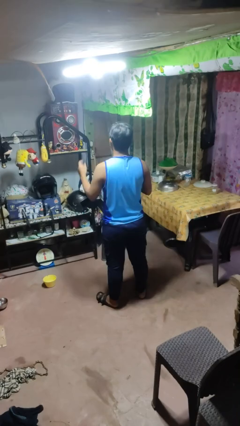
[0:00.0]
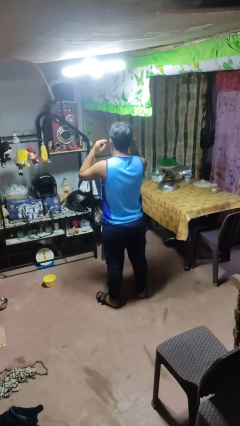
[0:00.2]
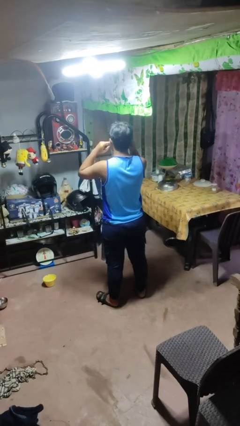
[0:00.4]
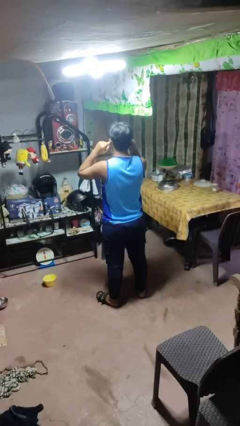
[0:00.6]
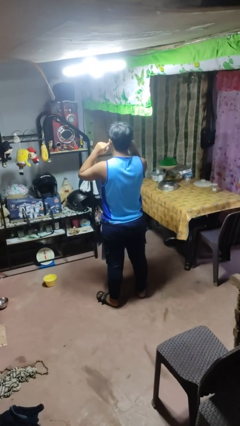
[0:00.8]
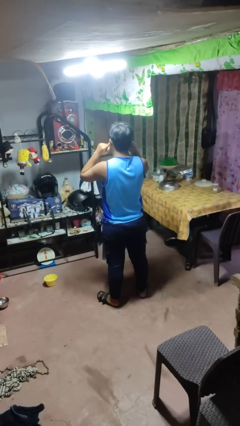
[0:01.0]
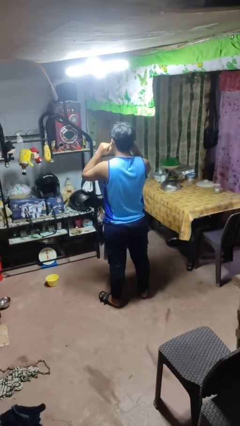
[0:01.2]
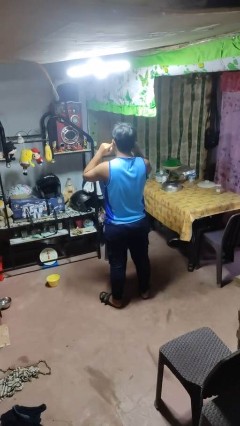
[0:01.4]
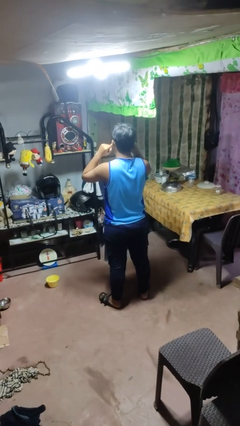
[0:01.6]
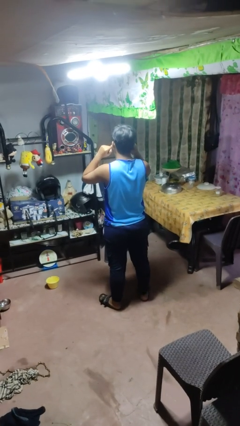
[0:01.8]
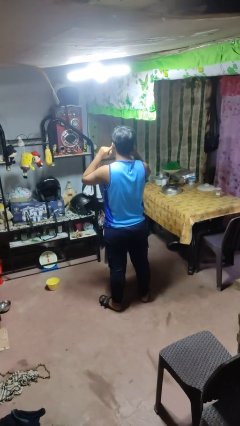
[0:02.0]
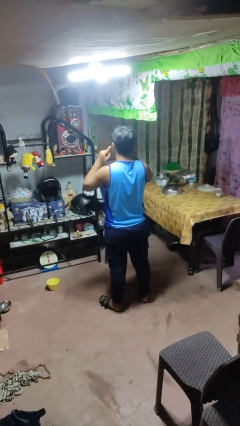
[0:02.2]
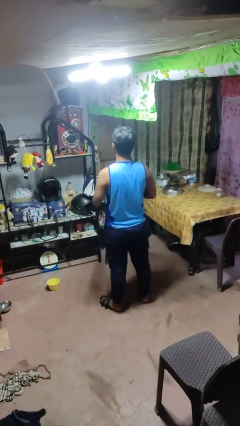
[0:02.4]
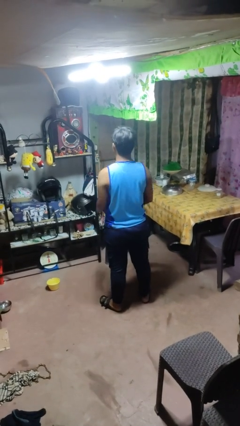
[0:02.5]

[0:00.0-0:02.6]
person puts fingers in ear

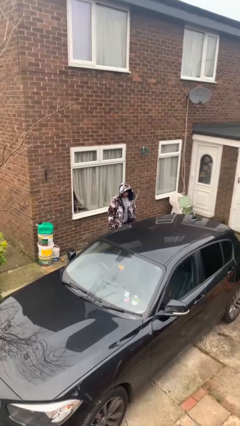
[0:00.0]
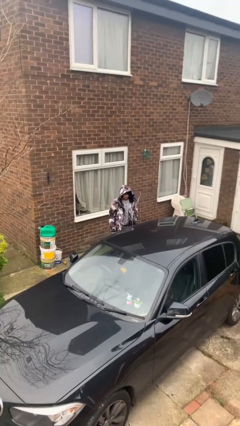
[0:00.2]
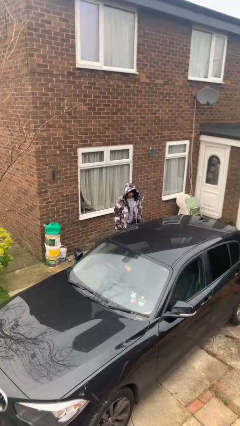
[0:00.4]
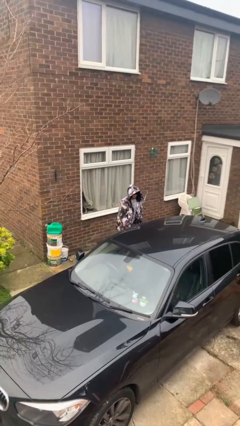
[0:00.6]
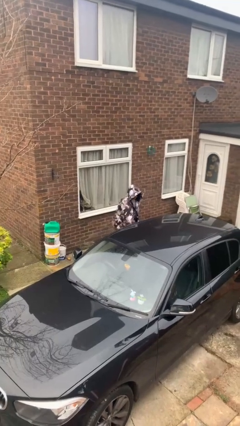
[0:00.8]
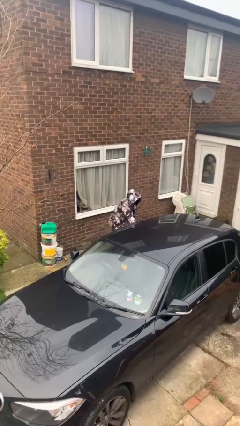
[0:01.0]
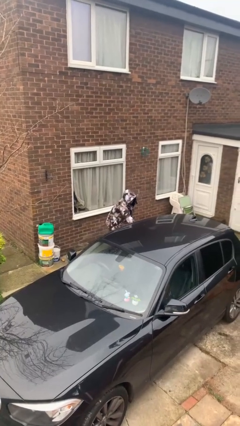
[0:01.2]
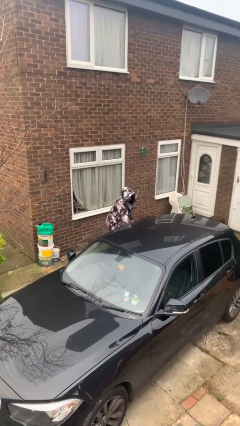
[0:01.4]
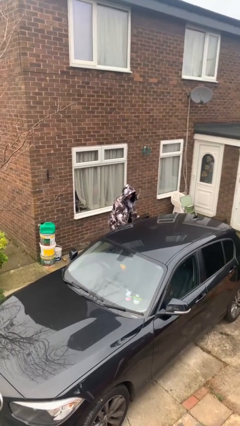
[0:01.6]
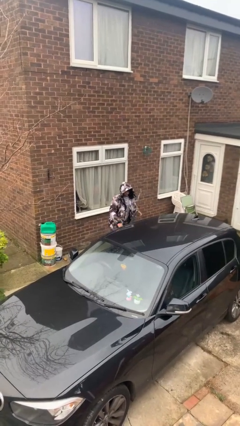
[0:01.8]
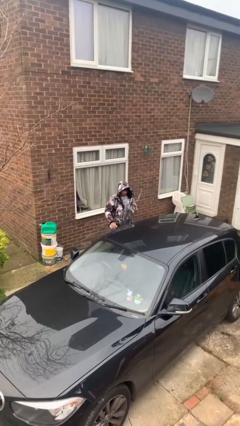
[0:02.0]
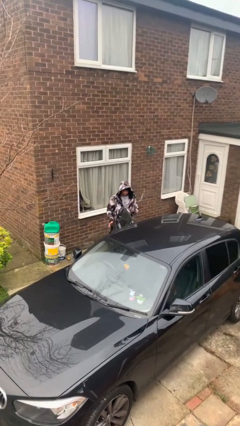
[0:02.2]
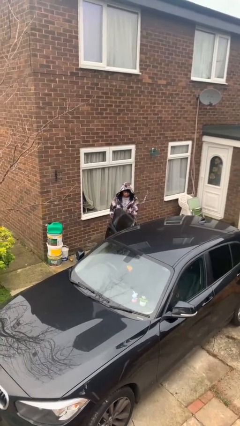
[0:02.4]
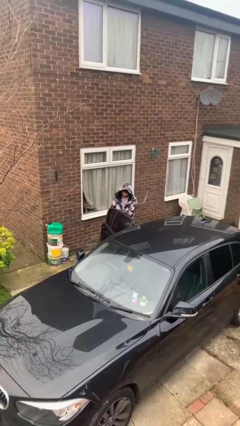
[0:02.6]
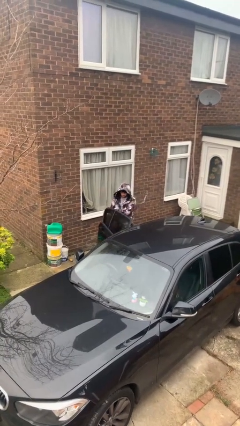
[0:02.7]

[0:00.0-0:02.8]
person opens car door

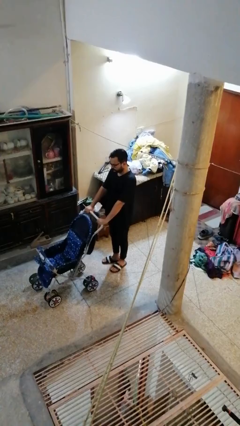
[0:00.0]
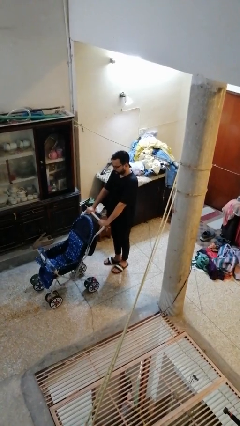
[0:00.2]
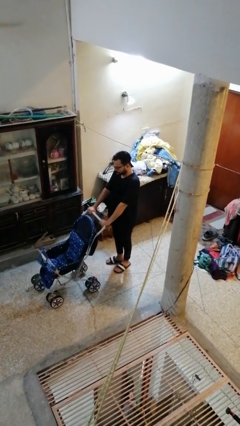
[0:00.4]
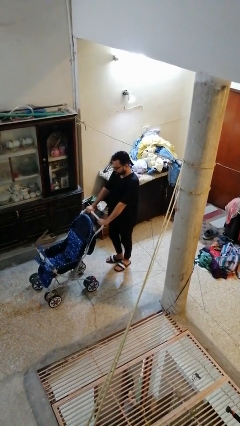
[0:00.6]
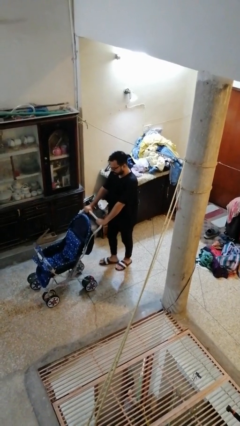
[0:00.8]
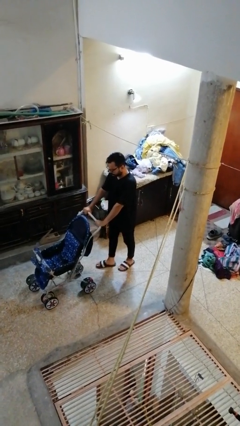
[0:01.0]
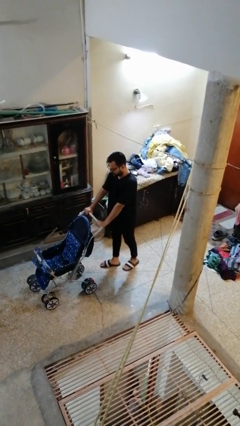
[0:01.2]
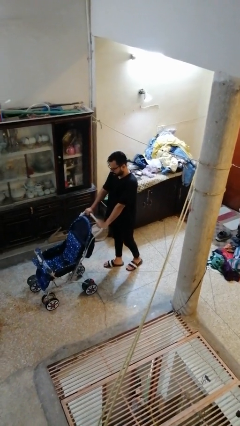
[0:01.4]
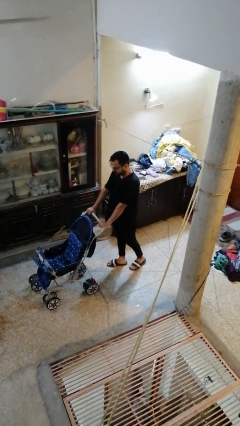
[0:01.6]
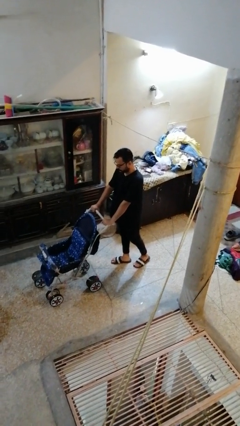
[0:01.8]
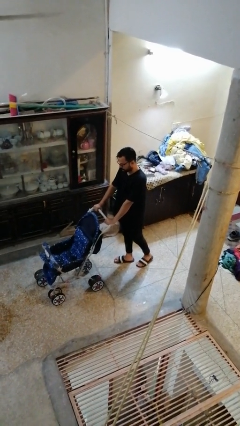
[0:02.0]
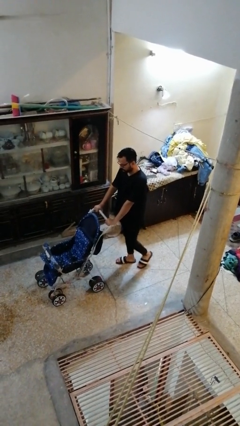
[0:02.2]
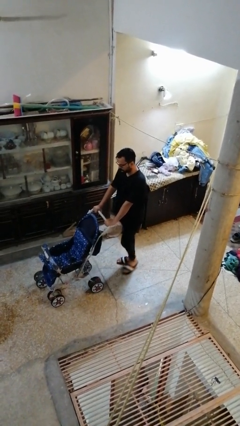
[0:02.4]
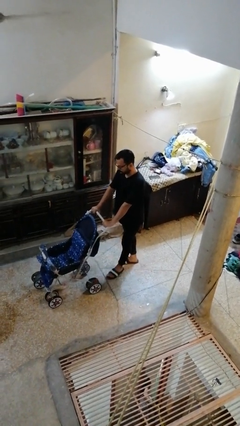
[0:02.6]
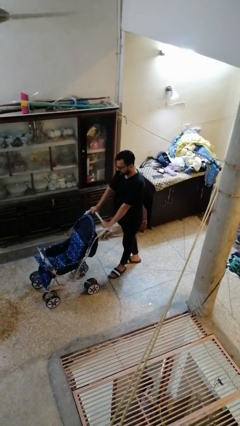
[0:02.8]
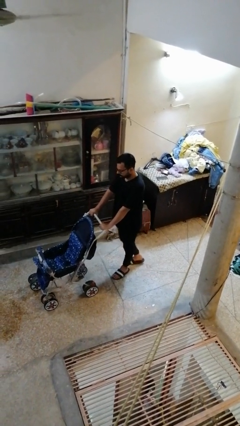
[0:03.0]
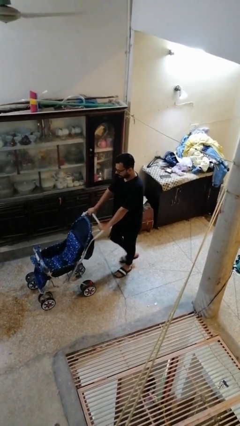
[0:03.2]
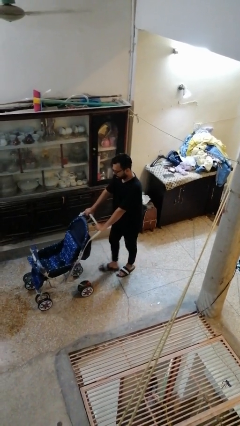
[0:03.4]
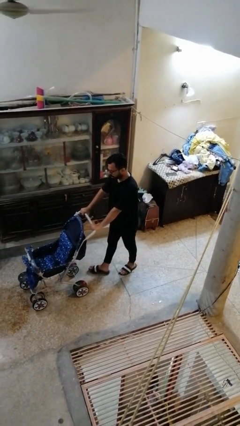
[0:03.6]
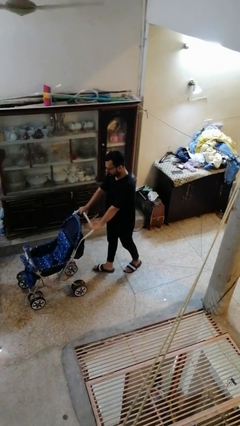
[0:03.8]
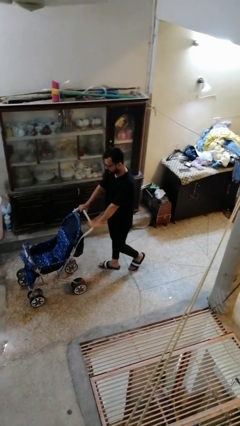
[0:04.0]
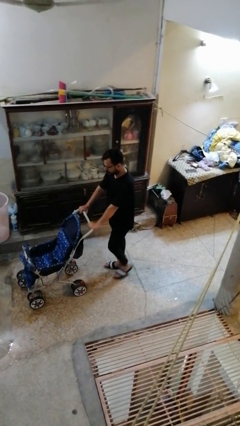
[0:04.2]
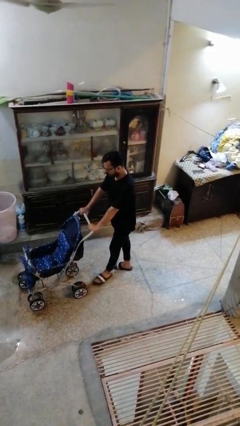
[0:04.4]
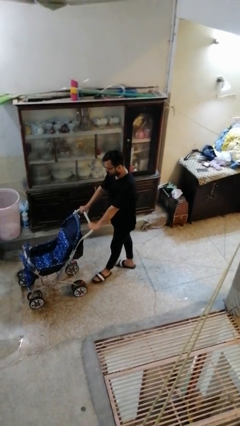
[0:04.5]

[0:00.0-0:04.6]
person pushes wheeled cart

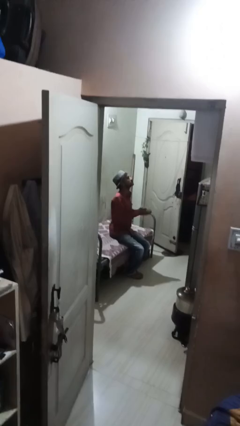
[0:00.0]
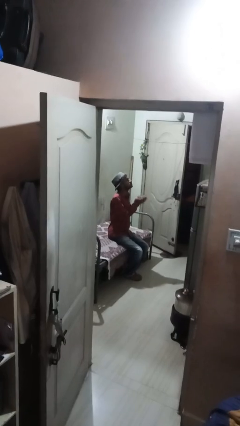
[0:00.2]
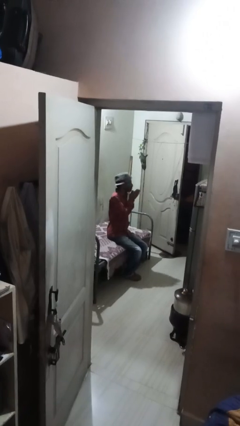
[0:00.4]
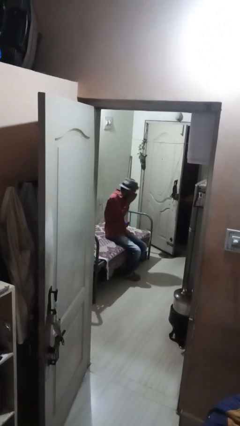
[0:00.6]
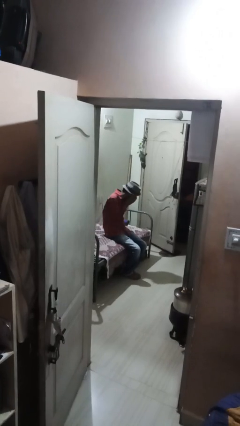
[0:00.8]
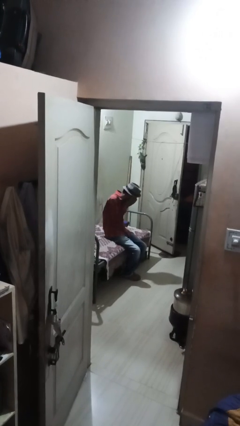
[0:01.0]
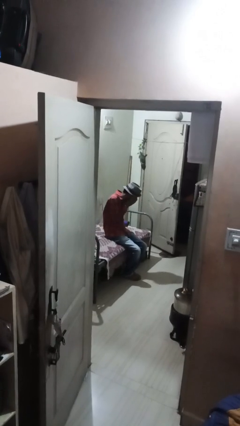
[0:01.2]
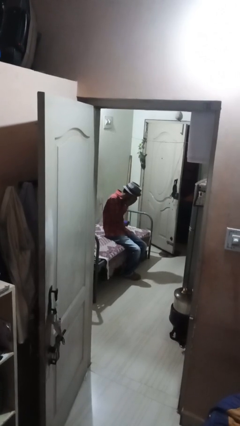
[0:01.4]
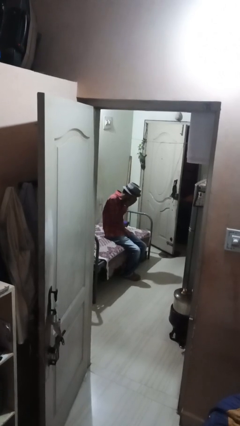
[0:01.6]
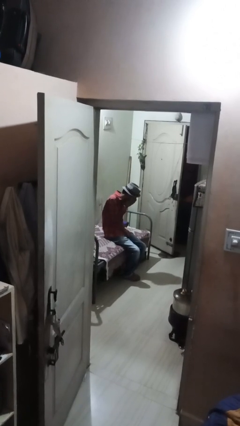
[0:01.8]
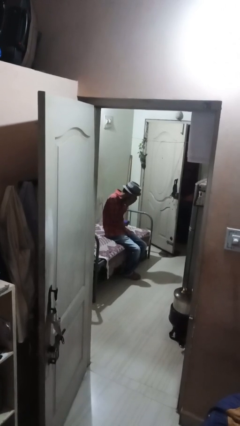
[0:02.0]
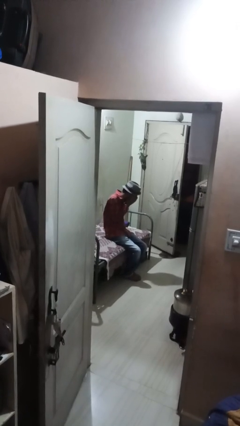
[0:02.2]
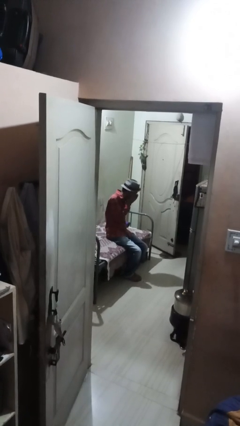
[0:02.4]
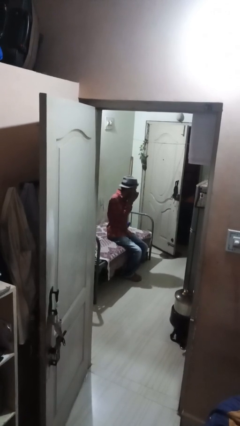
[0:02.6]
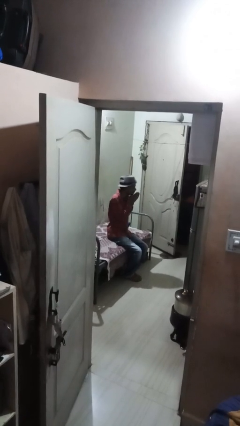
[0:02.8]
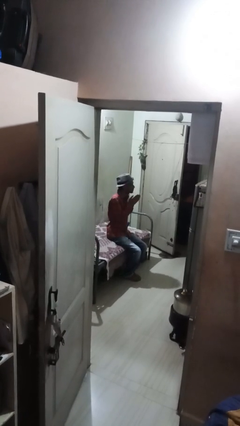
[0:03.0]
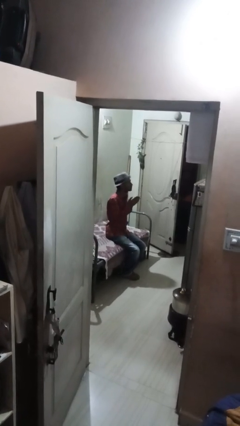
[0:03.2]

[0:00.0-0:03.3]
person sneezes into hand

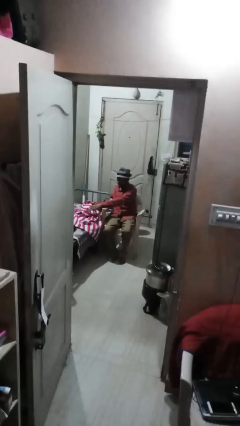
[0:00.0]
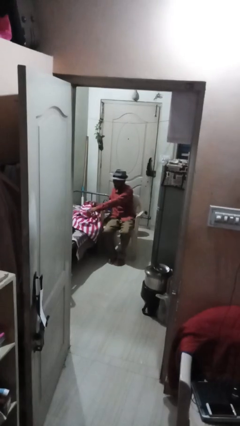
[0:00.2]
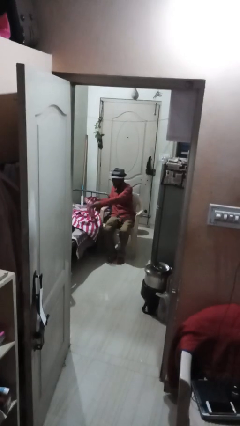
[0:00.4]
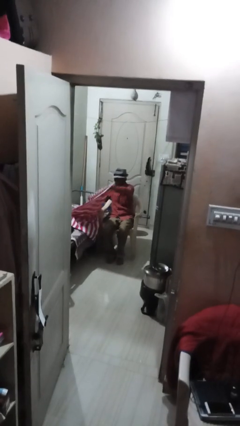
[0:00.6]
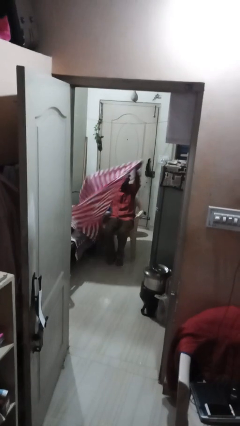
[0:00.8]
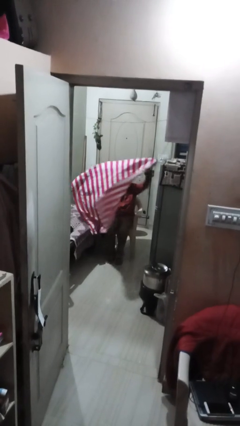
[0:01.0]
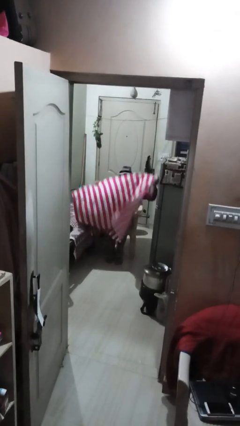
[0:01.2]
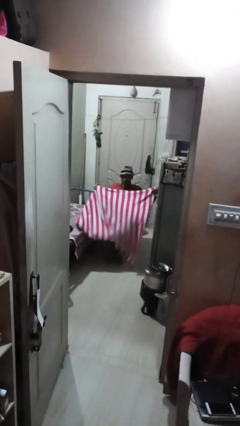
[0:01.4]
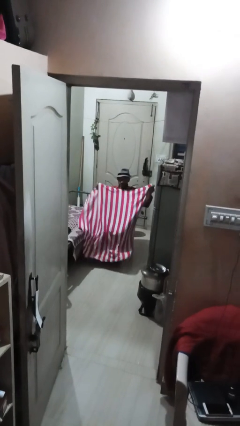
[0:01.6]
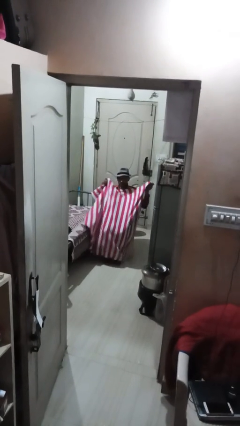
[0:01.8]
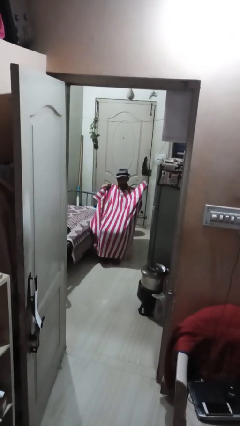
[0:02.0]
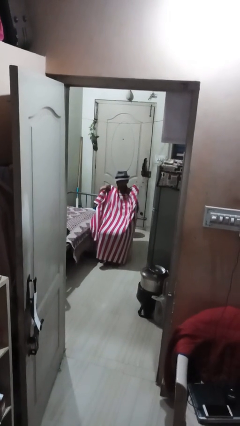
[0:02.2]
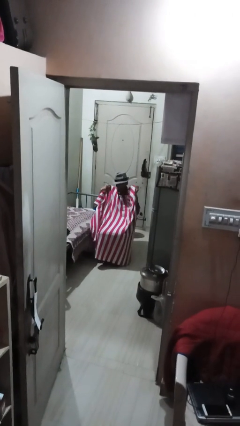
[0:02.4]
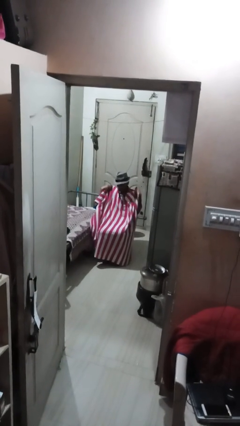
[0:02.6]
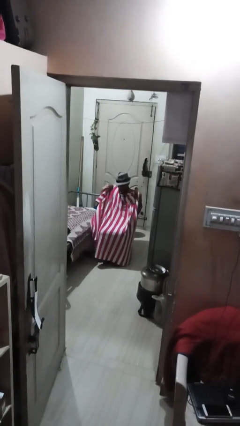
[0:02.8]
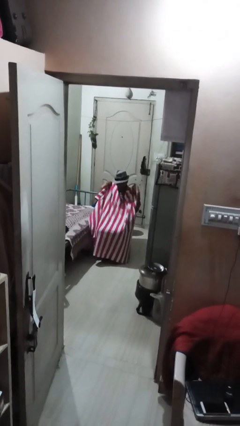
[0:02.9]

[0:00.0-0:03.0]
person covers with blanket

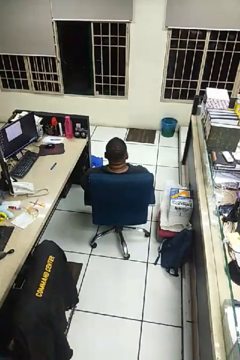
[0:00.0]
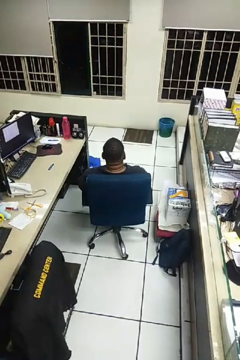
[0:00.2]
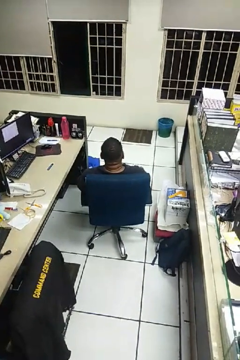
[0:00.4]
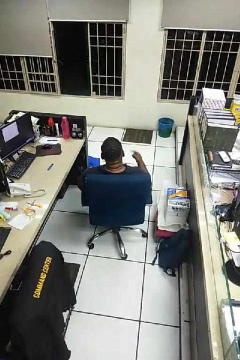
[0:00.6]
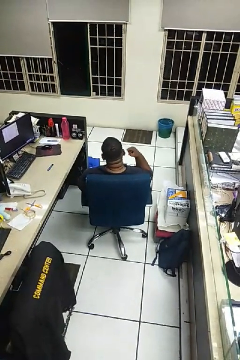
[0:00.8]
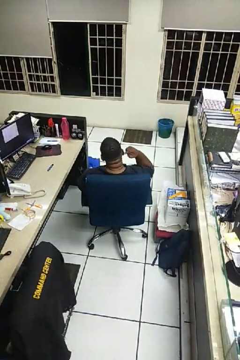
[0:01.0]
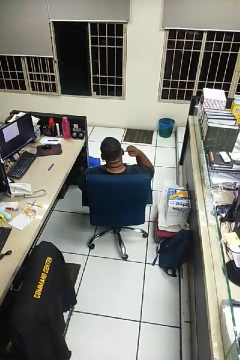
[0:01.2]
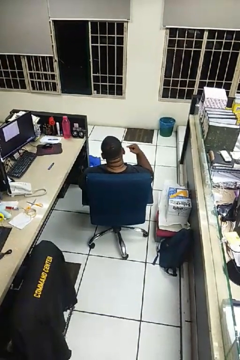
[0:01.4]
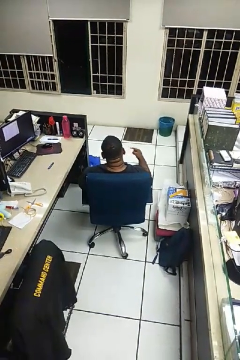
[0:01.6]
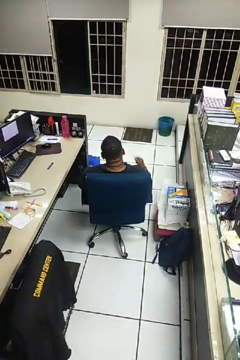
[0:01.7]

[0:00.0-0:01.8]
person gestures listen closely
